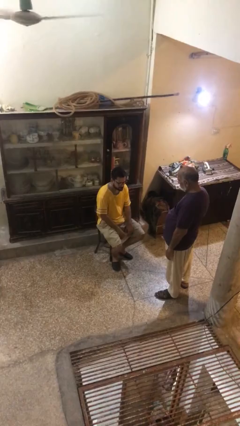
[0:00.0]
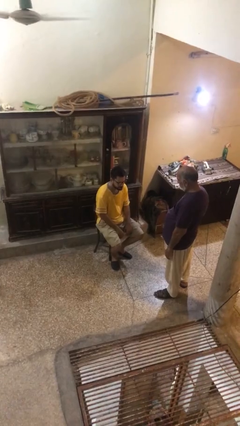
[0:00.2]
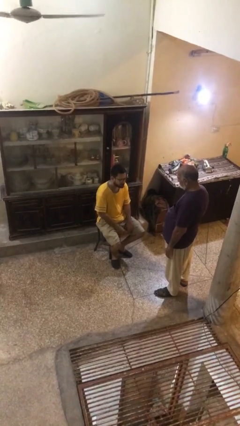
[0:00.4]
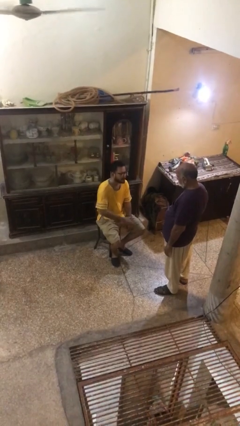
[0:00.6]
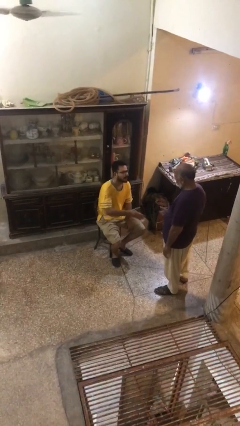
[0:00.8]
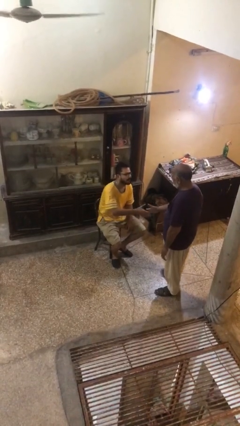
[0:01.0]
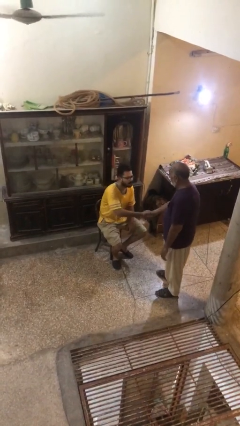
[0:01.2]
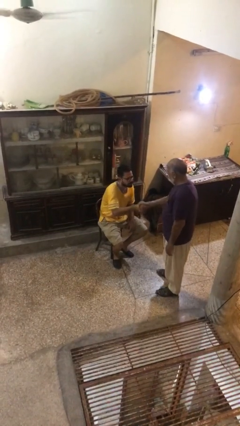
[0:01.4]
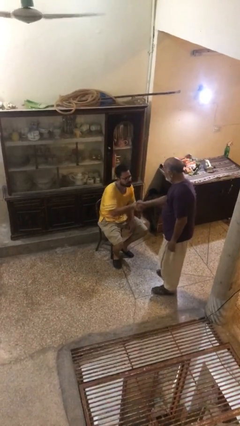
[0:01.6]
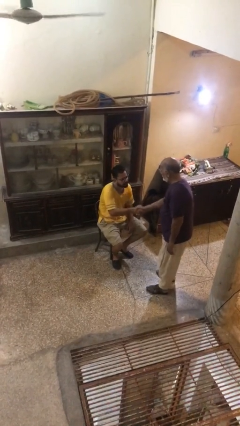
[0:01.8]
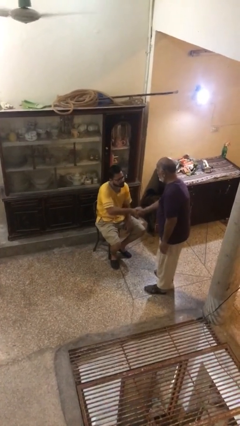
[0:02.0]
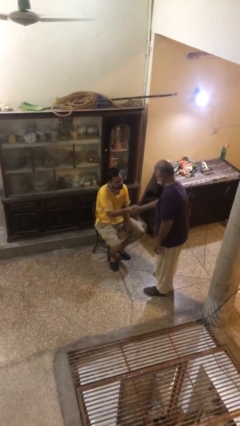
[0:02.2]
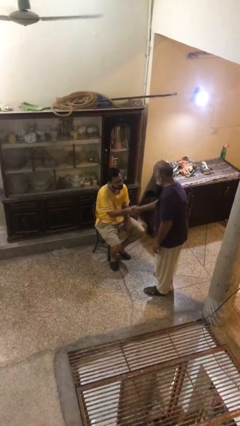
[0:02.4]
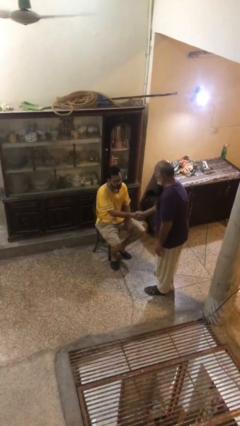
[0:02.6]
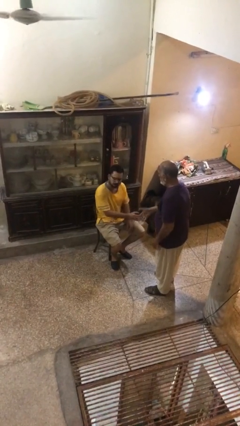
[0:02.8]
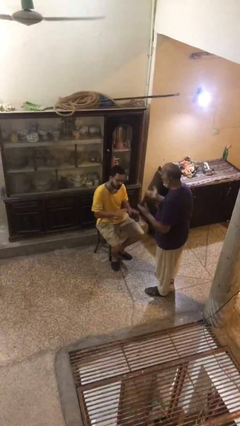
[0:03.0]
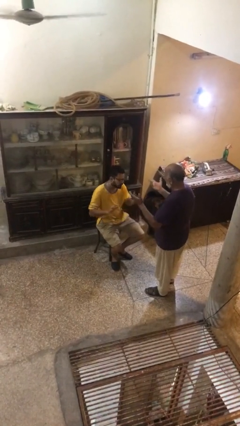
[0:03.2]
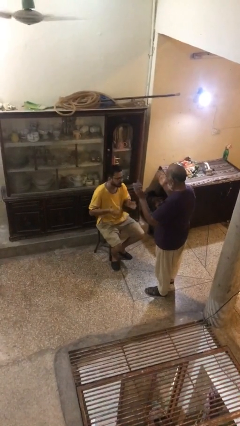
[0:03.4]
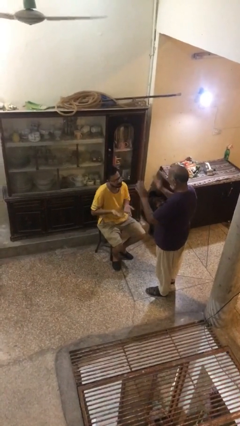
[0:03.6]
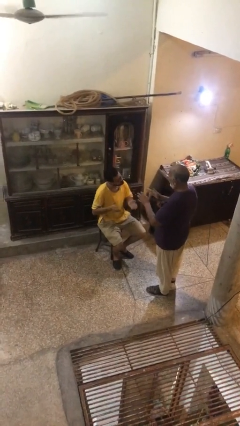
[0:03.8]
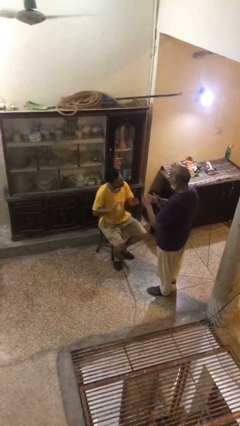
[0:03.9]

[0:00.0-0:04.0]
person shakes hand

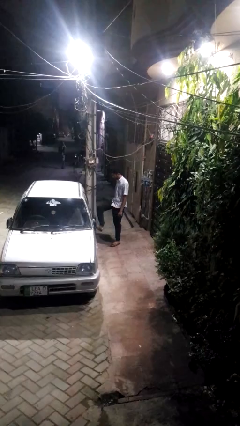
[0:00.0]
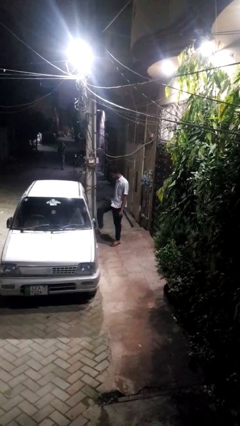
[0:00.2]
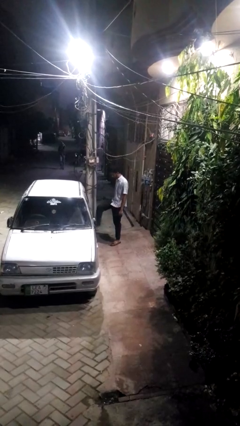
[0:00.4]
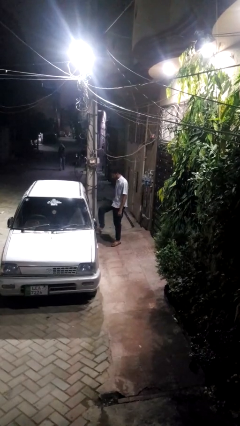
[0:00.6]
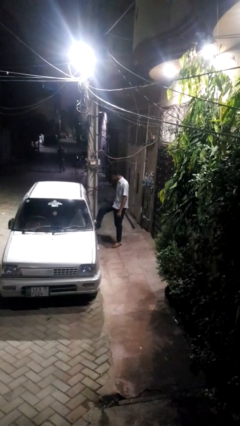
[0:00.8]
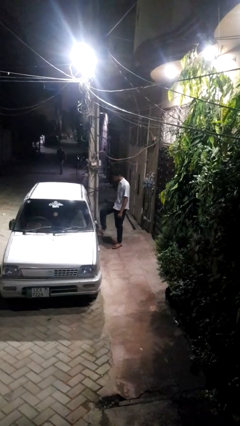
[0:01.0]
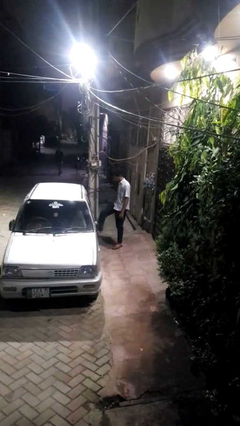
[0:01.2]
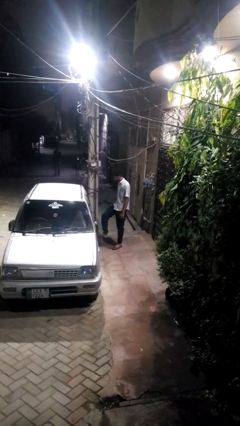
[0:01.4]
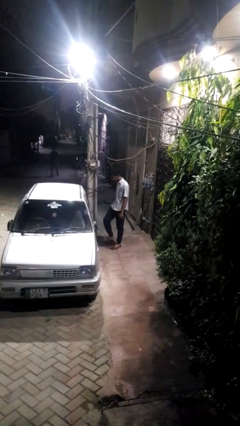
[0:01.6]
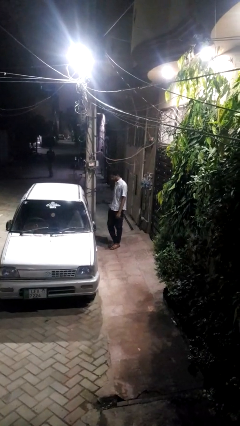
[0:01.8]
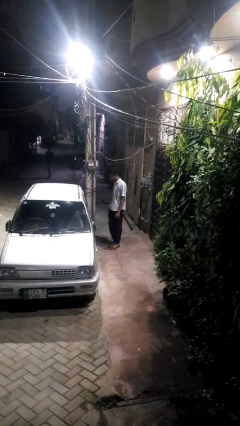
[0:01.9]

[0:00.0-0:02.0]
person kicks car tires

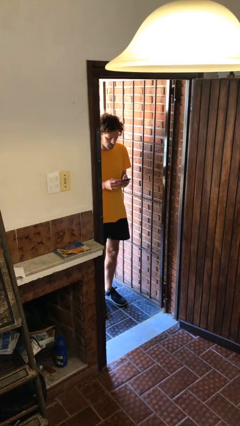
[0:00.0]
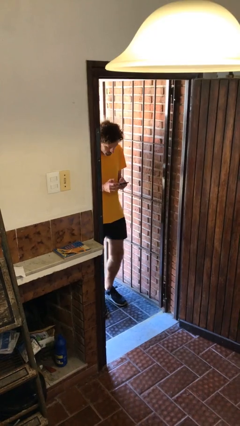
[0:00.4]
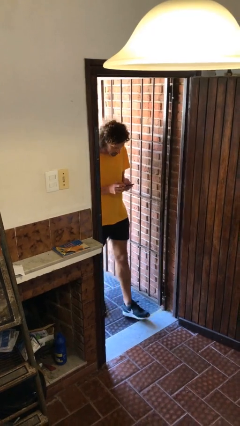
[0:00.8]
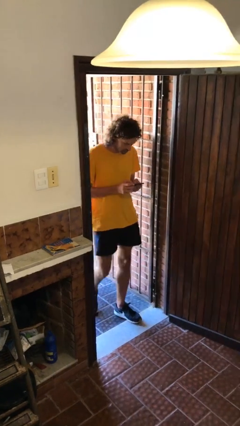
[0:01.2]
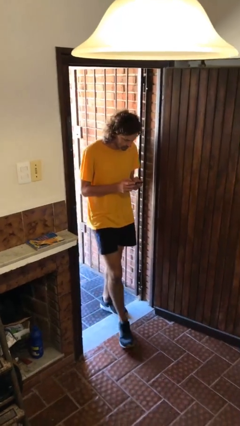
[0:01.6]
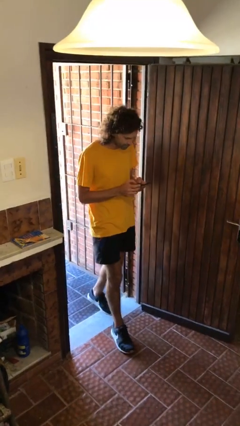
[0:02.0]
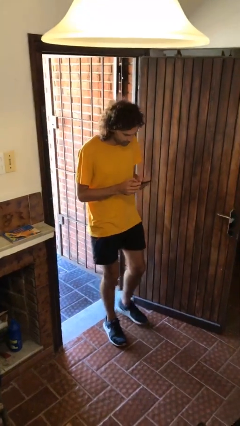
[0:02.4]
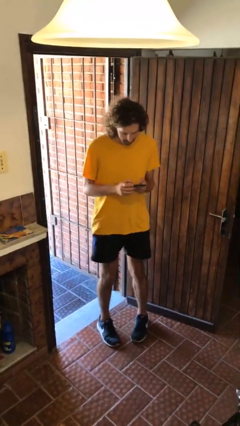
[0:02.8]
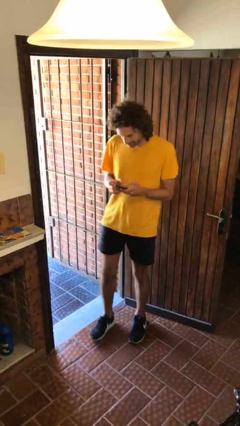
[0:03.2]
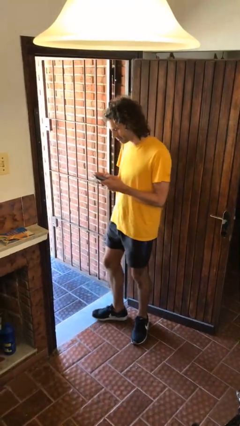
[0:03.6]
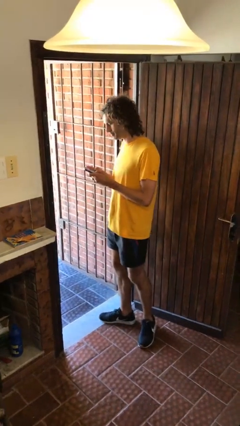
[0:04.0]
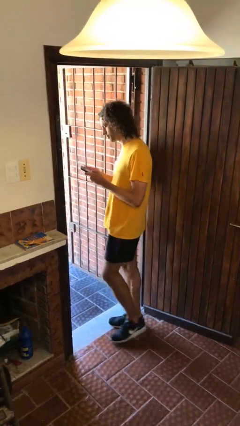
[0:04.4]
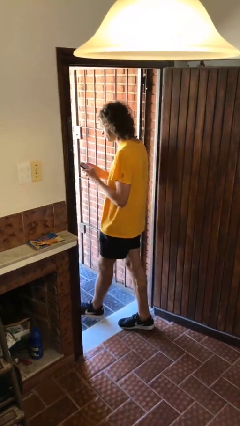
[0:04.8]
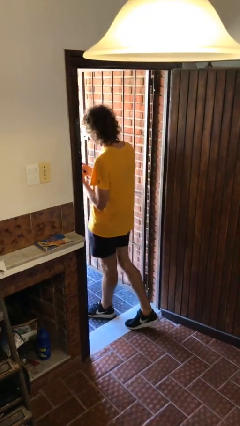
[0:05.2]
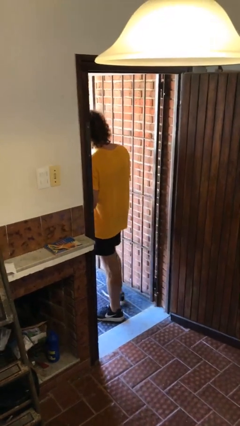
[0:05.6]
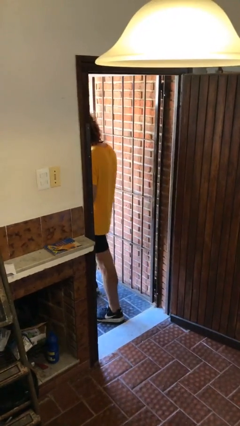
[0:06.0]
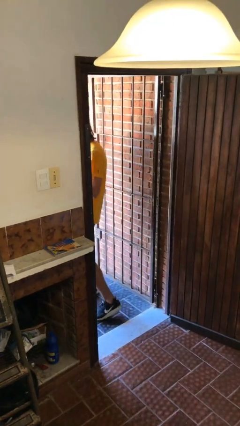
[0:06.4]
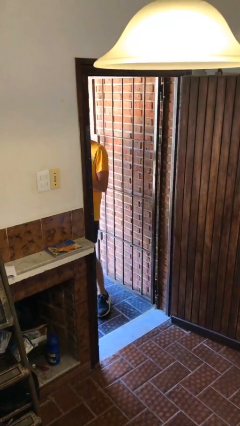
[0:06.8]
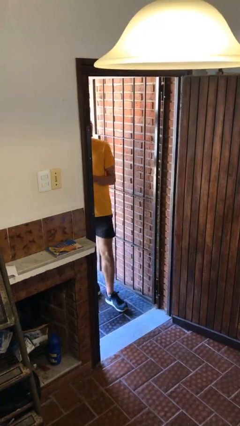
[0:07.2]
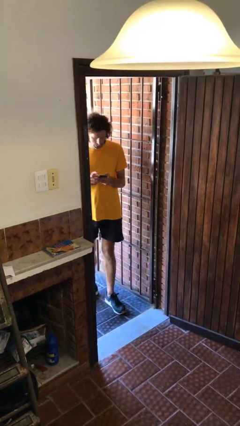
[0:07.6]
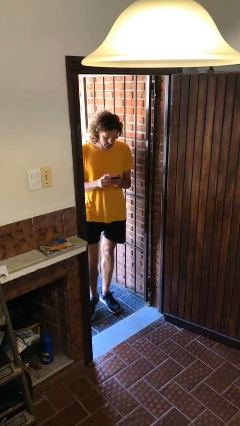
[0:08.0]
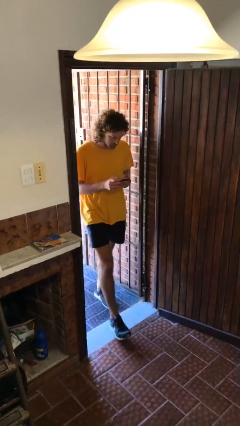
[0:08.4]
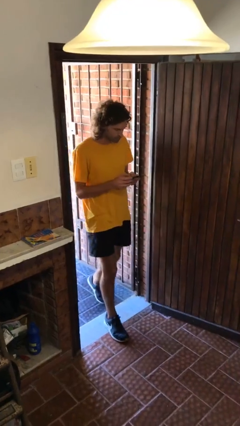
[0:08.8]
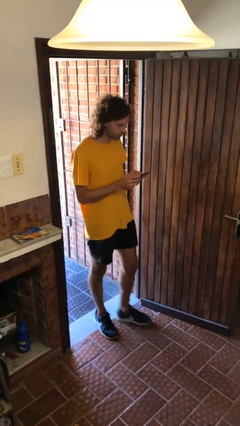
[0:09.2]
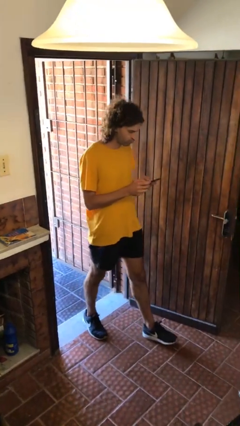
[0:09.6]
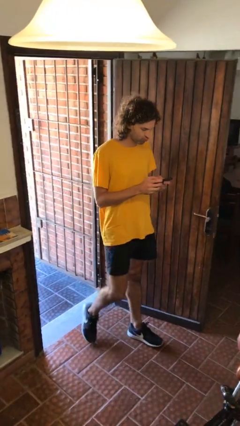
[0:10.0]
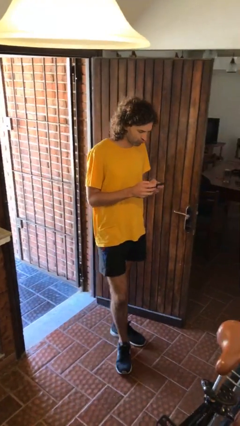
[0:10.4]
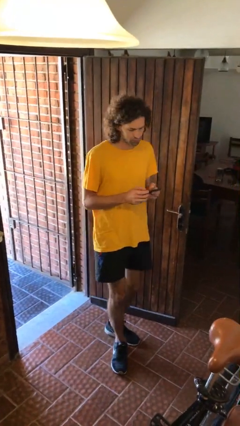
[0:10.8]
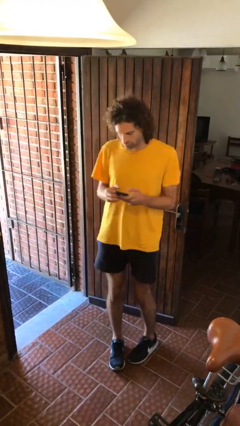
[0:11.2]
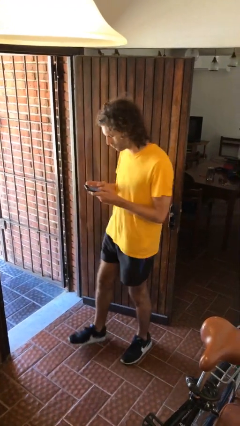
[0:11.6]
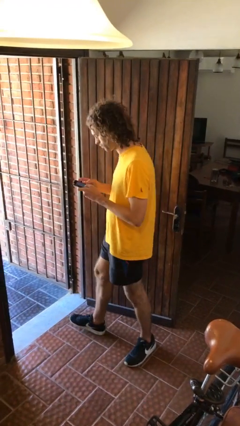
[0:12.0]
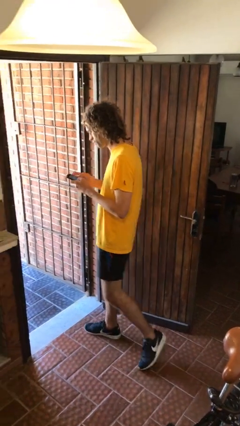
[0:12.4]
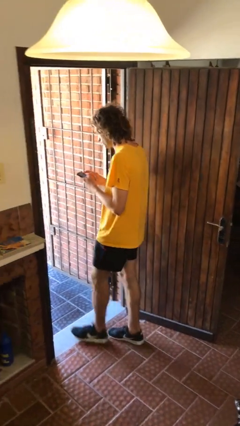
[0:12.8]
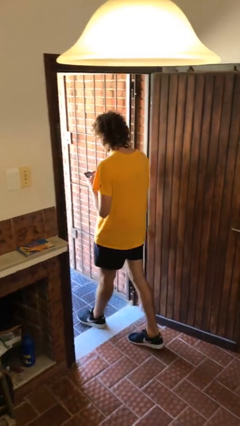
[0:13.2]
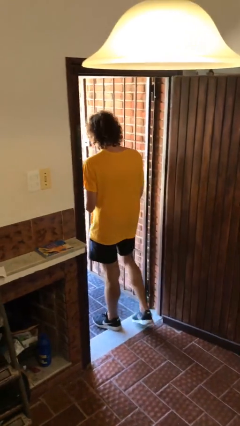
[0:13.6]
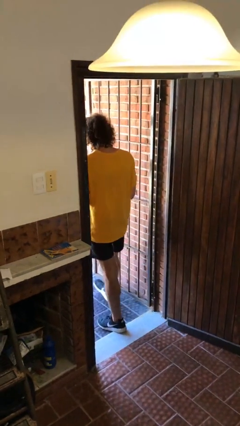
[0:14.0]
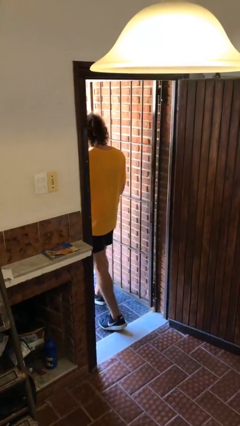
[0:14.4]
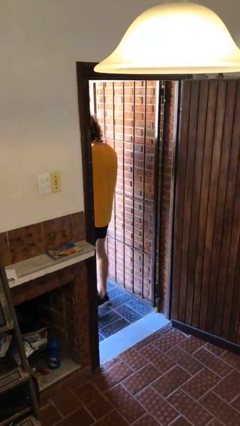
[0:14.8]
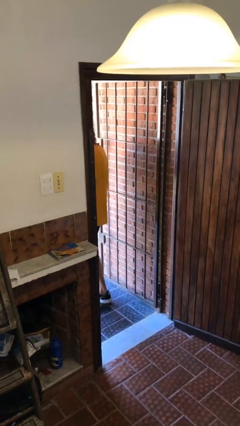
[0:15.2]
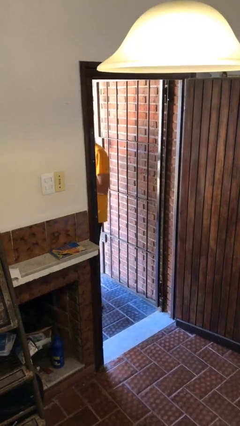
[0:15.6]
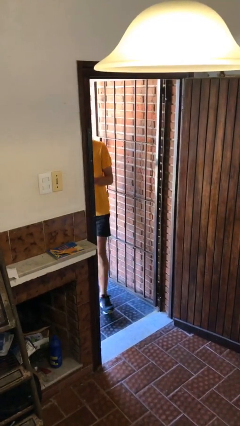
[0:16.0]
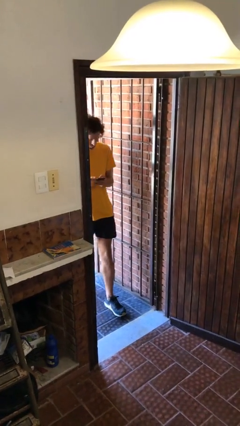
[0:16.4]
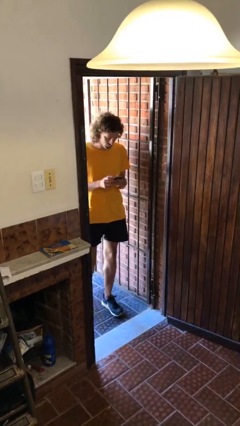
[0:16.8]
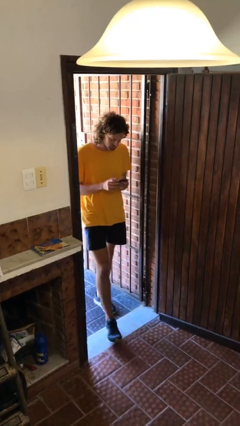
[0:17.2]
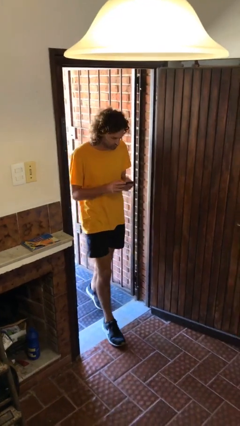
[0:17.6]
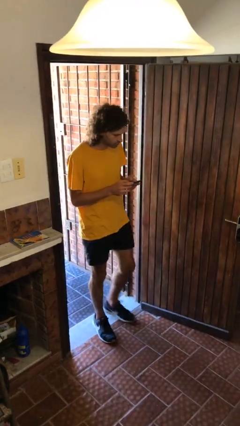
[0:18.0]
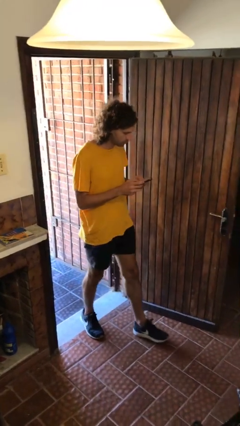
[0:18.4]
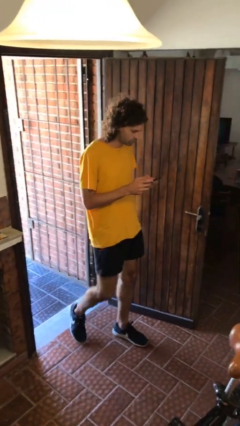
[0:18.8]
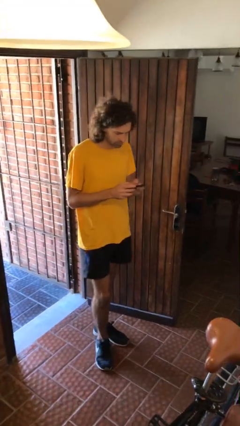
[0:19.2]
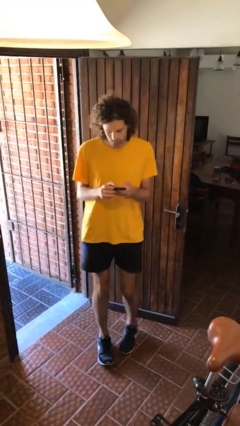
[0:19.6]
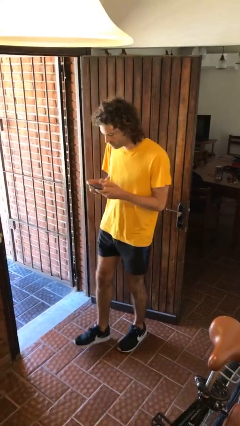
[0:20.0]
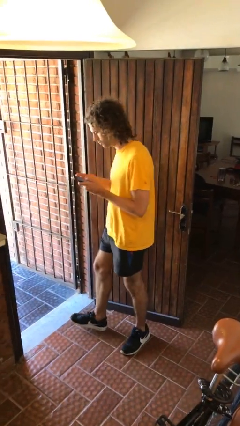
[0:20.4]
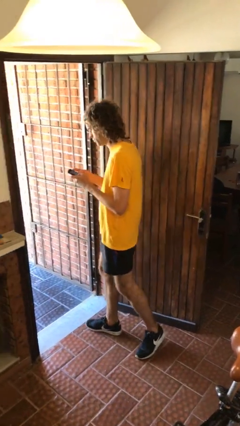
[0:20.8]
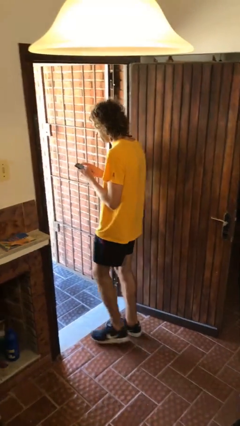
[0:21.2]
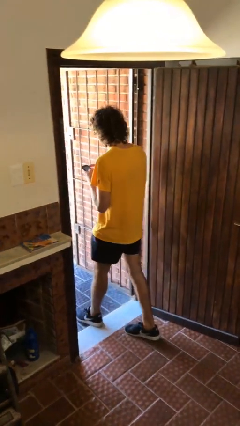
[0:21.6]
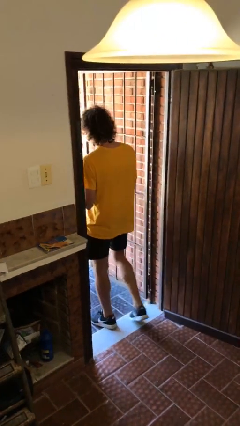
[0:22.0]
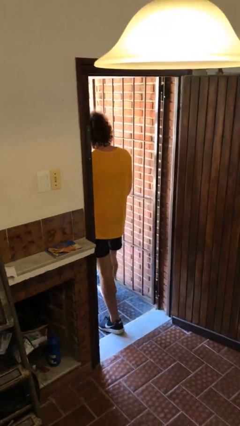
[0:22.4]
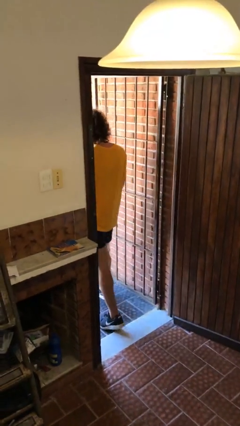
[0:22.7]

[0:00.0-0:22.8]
person texts on phone

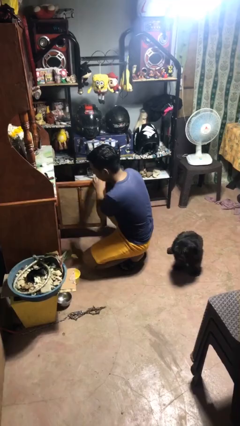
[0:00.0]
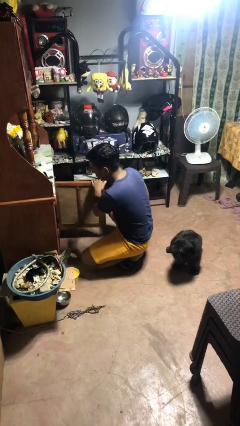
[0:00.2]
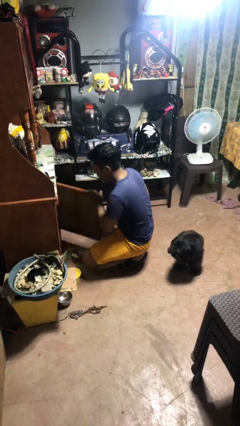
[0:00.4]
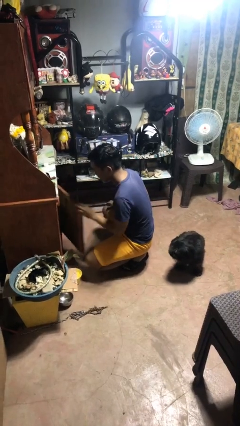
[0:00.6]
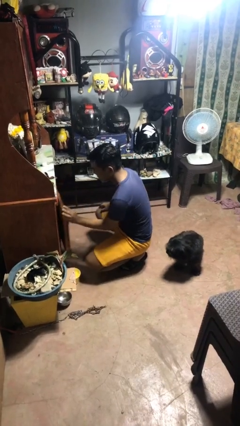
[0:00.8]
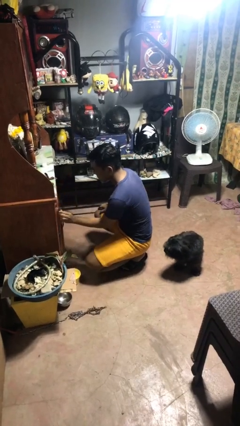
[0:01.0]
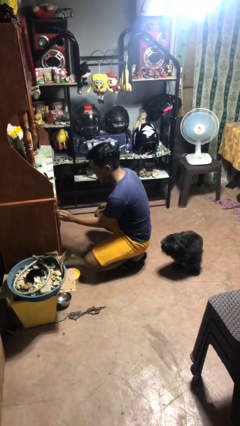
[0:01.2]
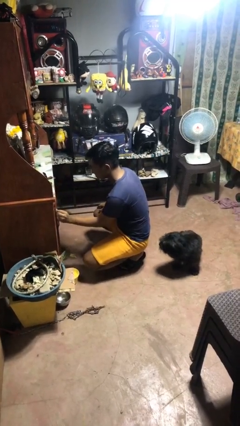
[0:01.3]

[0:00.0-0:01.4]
person closes cabinet
